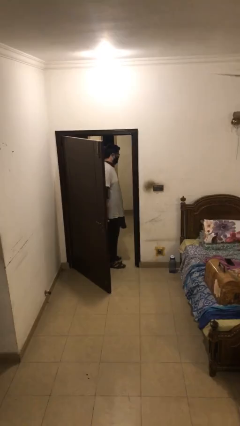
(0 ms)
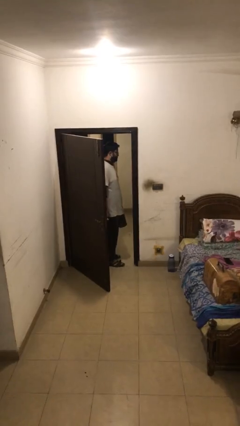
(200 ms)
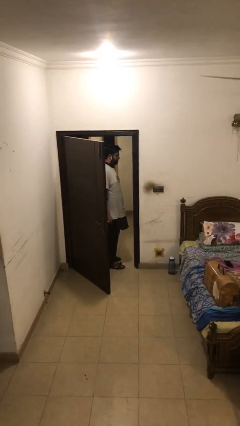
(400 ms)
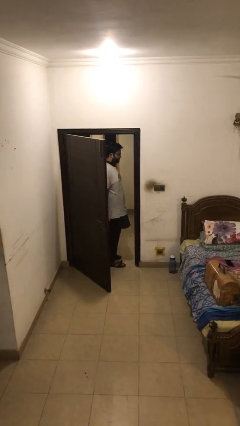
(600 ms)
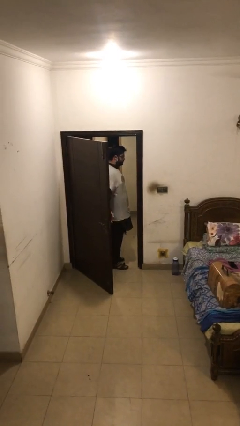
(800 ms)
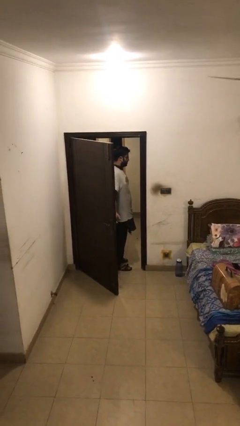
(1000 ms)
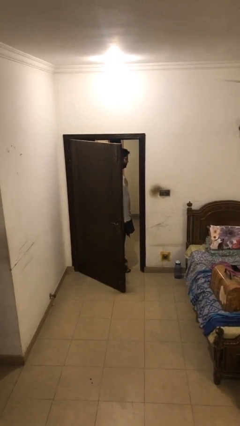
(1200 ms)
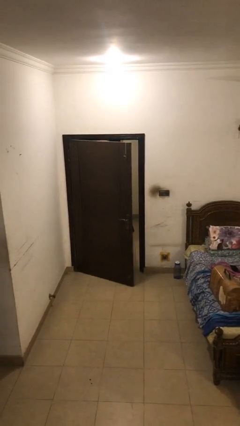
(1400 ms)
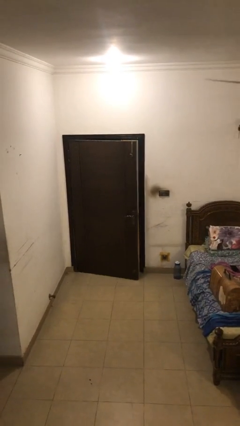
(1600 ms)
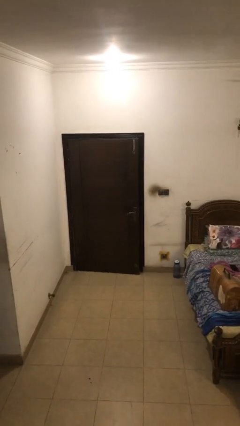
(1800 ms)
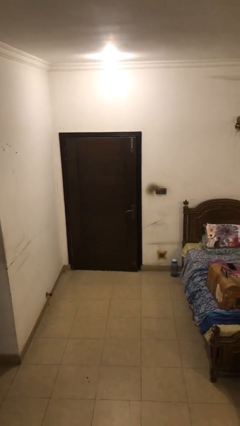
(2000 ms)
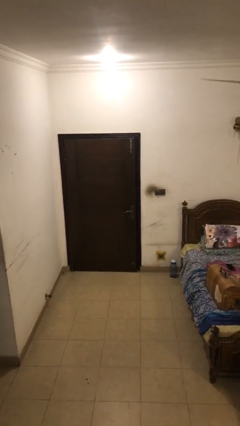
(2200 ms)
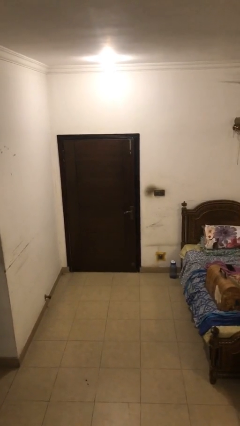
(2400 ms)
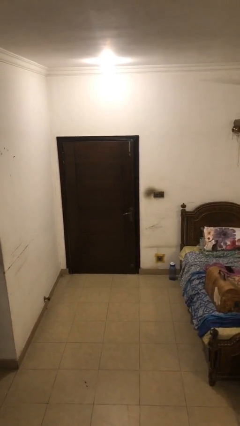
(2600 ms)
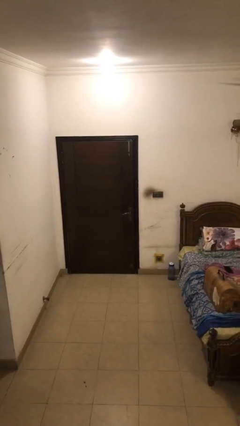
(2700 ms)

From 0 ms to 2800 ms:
person closes facility door

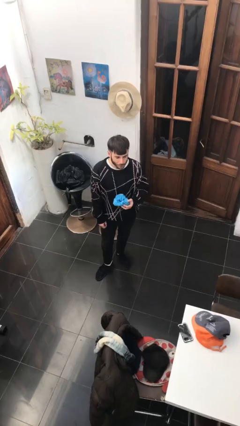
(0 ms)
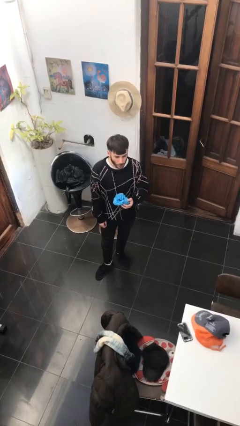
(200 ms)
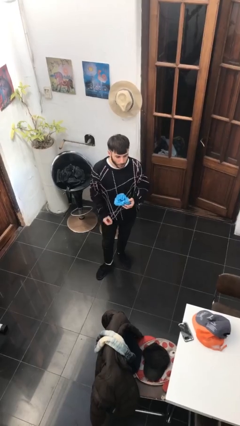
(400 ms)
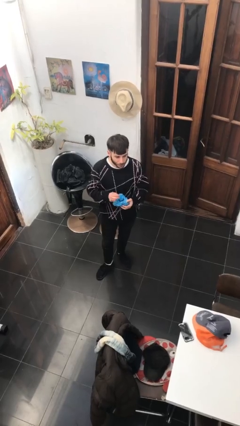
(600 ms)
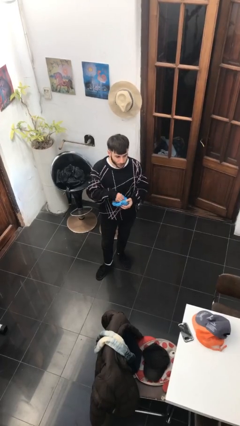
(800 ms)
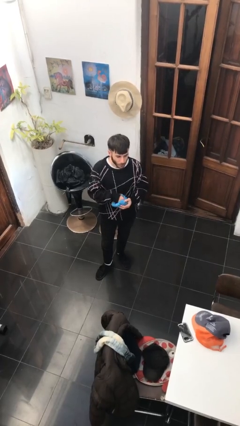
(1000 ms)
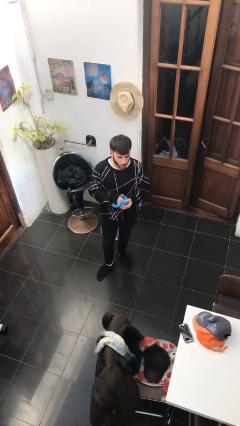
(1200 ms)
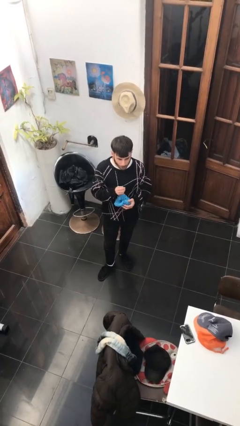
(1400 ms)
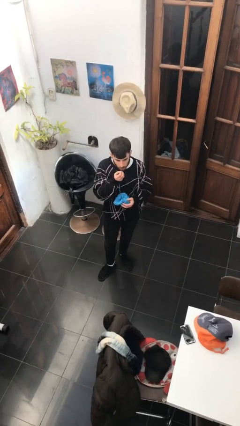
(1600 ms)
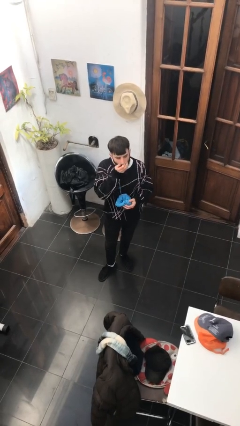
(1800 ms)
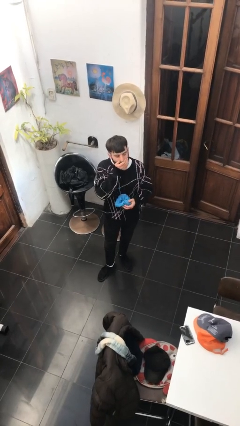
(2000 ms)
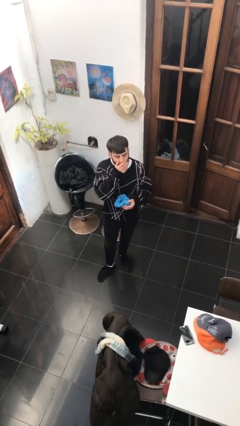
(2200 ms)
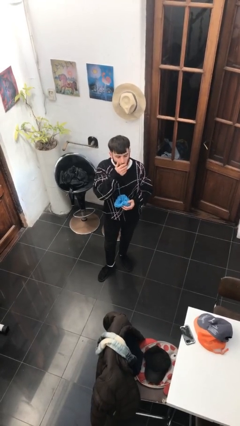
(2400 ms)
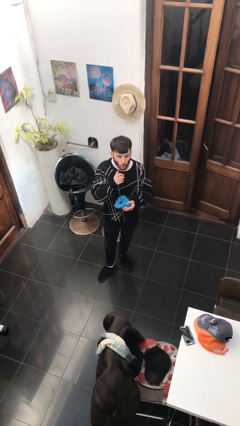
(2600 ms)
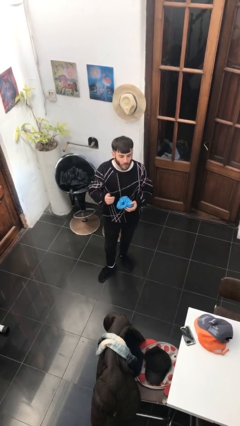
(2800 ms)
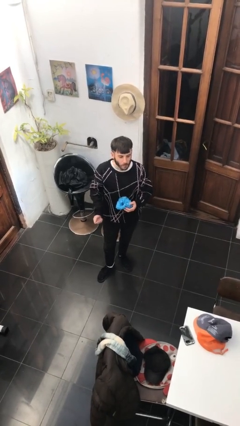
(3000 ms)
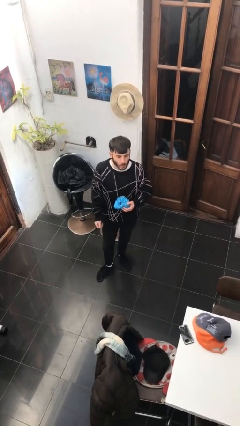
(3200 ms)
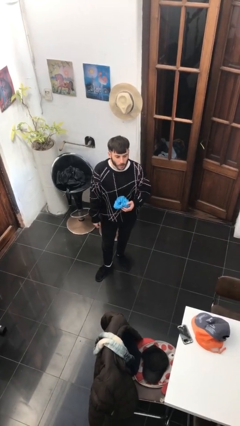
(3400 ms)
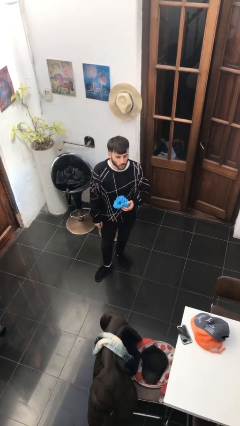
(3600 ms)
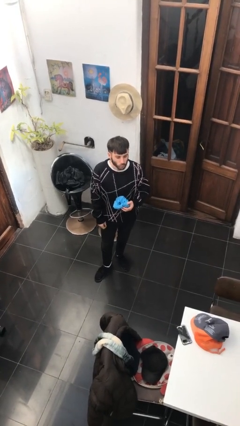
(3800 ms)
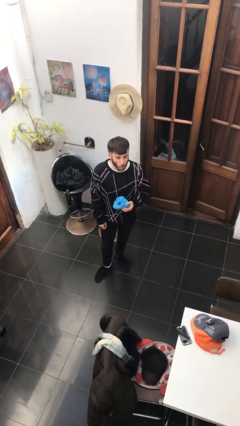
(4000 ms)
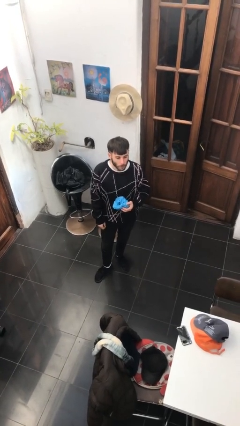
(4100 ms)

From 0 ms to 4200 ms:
person eats snack from bag

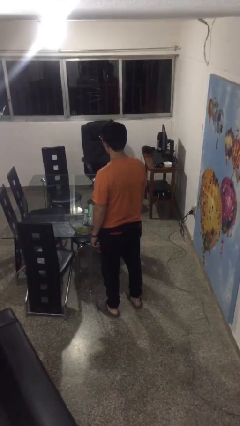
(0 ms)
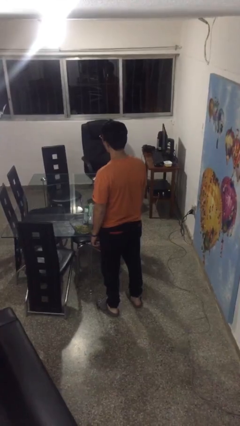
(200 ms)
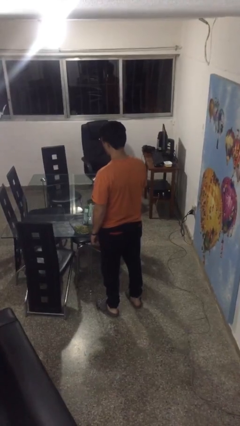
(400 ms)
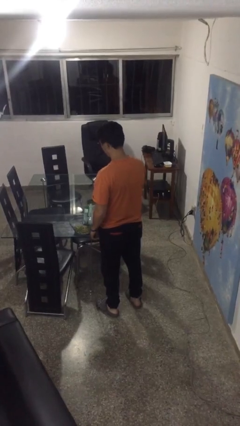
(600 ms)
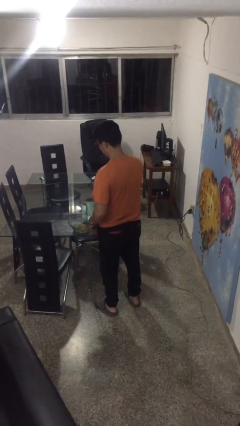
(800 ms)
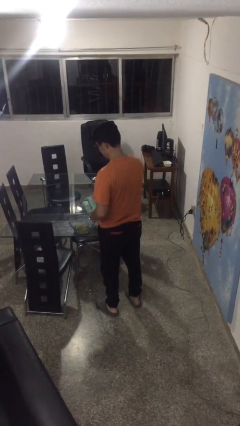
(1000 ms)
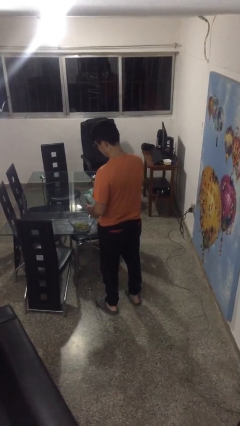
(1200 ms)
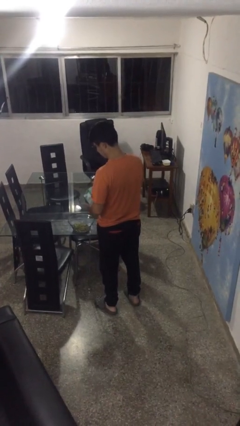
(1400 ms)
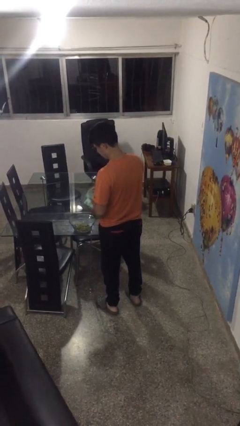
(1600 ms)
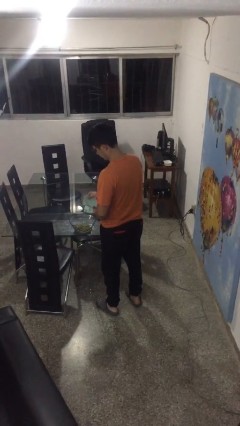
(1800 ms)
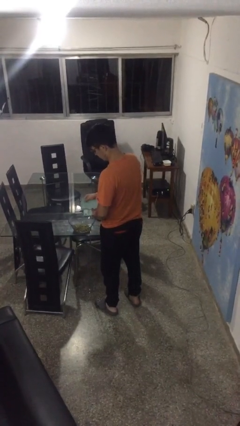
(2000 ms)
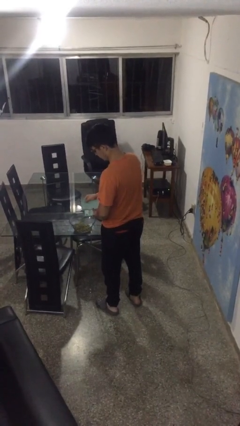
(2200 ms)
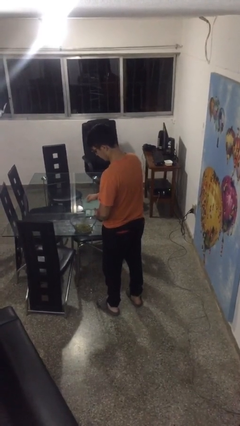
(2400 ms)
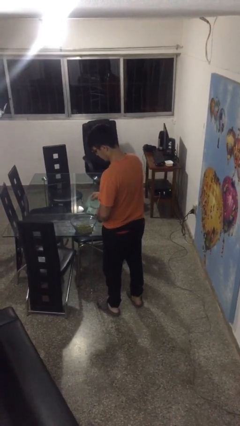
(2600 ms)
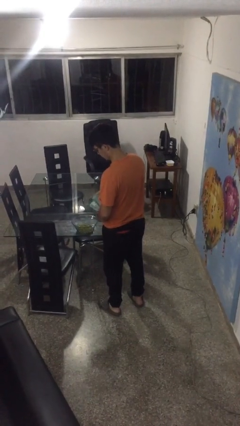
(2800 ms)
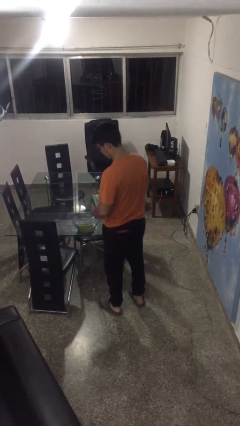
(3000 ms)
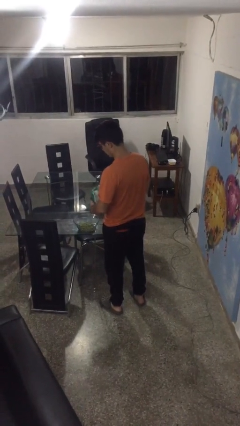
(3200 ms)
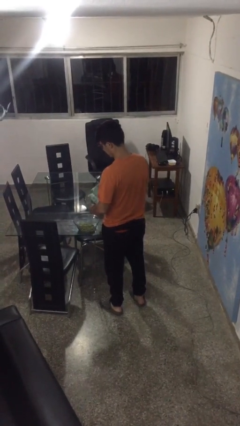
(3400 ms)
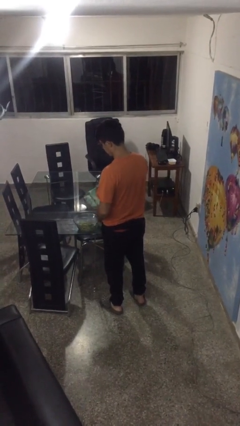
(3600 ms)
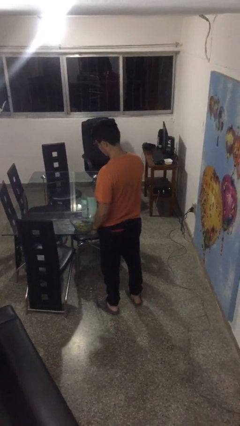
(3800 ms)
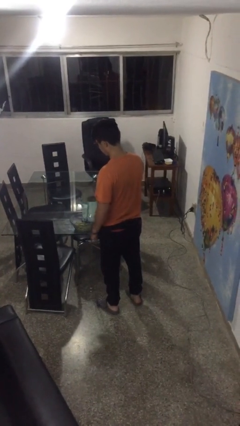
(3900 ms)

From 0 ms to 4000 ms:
person pours into bowl

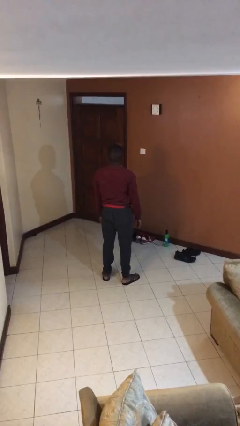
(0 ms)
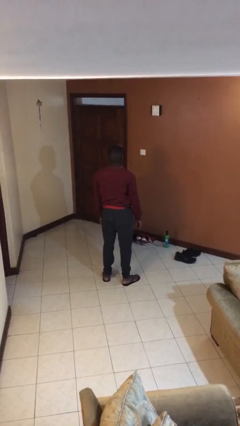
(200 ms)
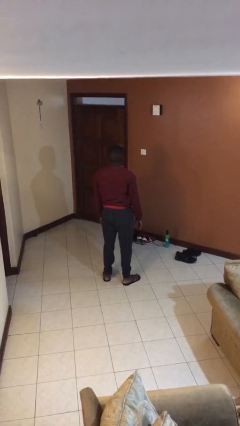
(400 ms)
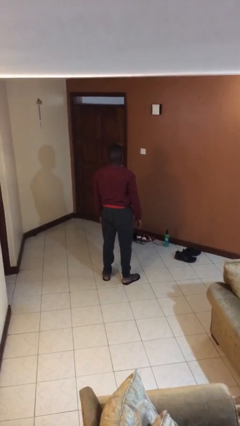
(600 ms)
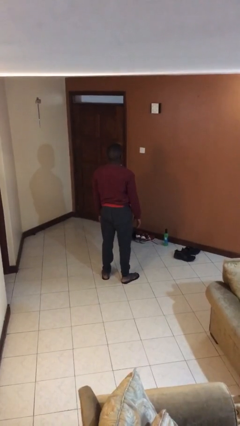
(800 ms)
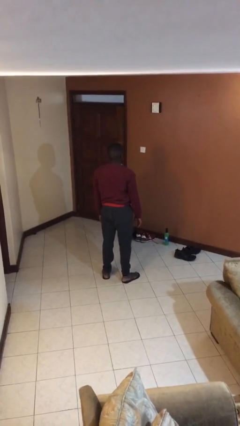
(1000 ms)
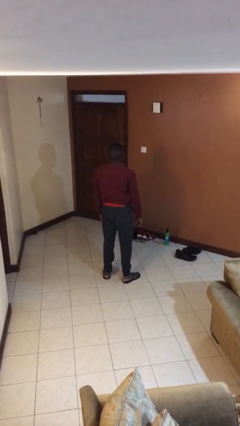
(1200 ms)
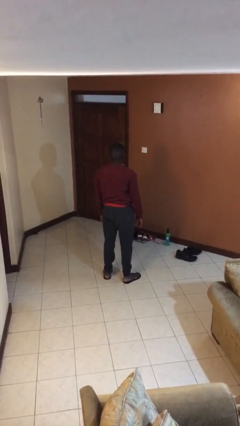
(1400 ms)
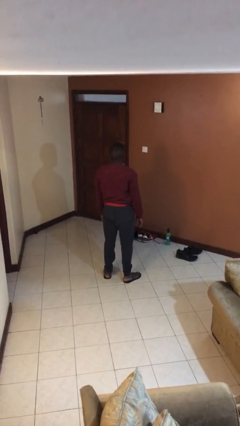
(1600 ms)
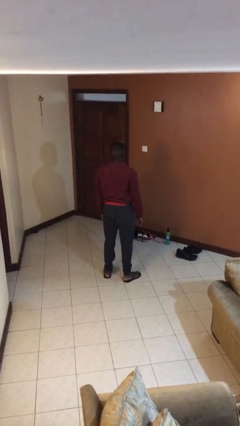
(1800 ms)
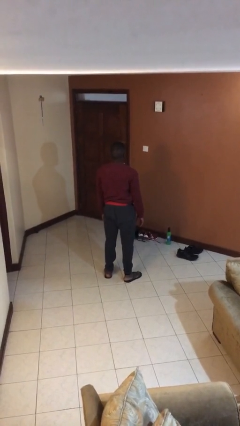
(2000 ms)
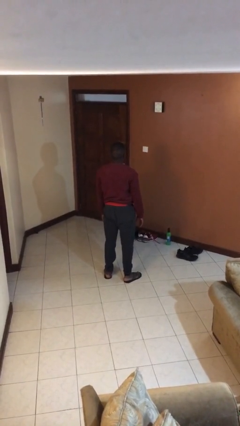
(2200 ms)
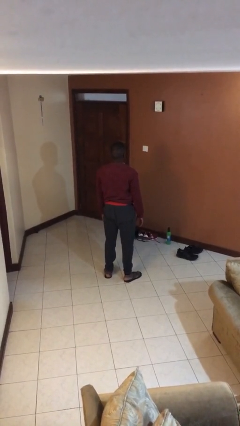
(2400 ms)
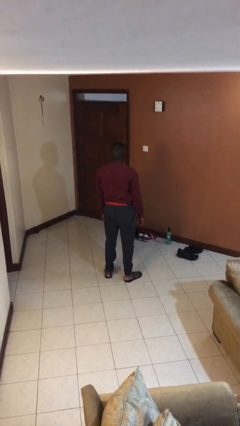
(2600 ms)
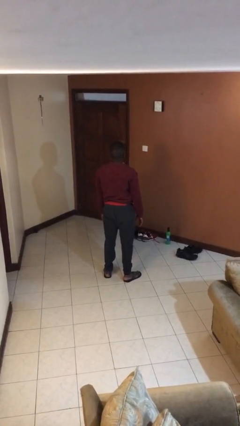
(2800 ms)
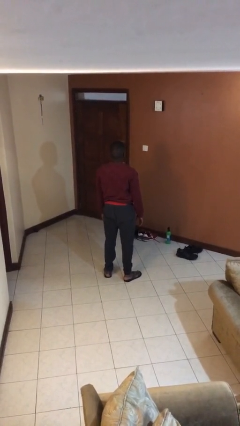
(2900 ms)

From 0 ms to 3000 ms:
person gestures swipe up

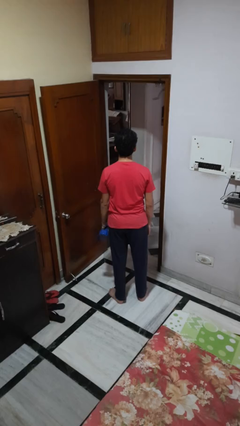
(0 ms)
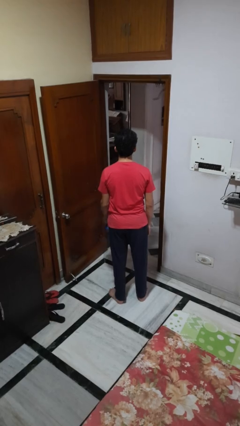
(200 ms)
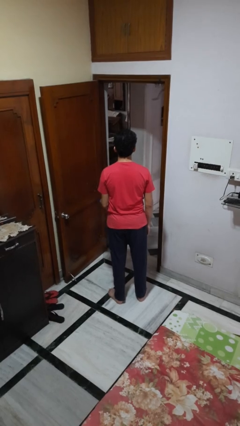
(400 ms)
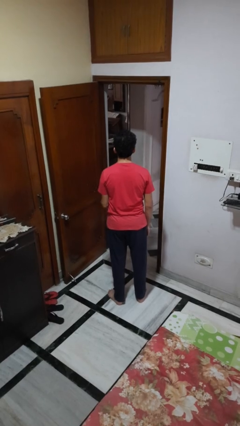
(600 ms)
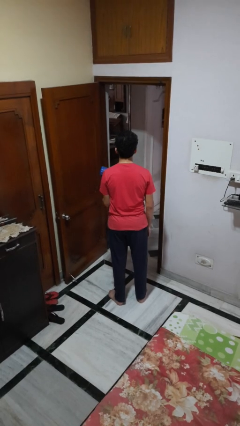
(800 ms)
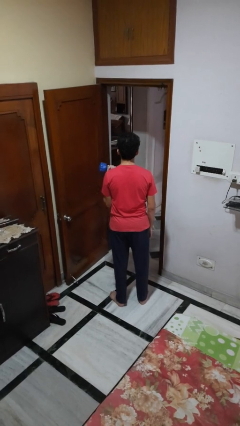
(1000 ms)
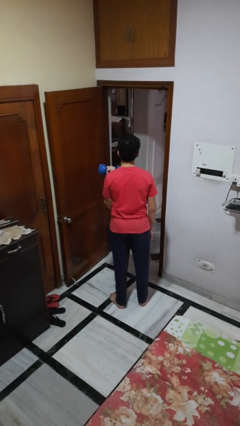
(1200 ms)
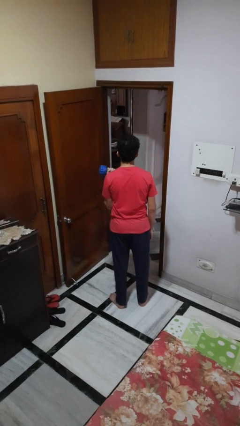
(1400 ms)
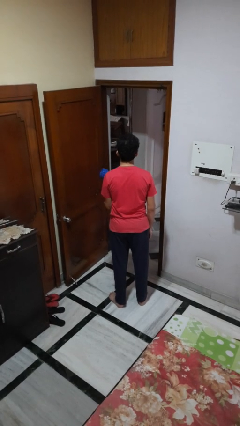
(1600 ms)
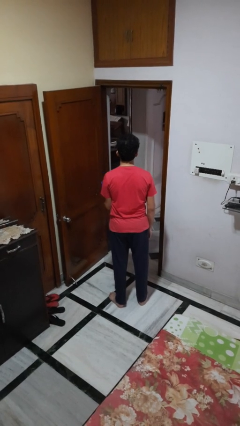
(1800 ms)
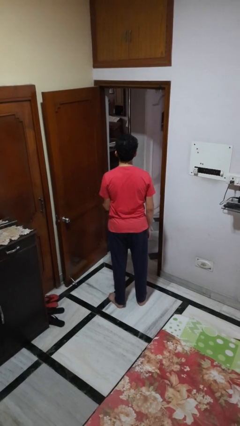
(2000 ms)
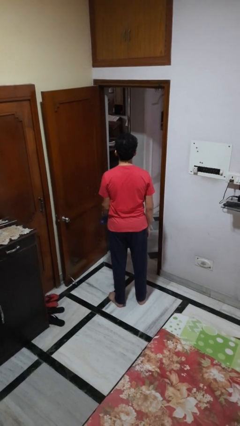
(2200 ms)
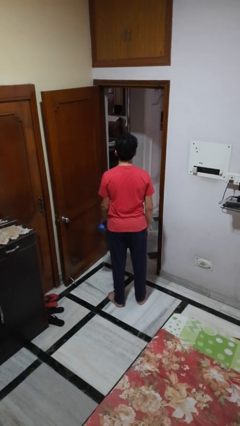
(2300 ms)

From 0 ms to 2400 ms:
person lifts dumbbells

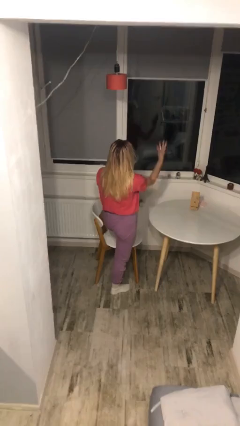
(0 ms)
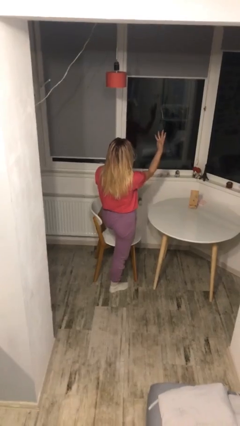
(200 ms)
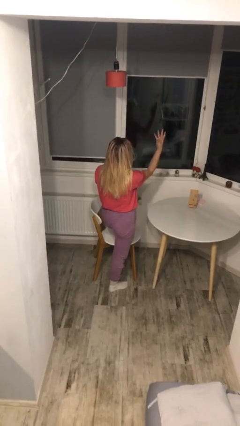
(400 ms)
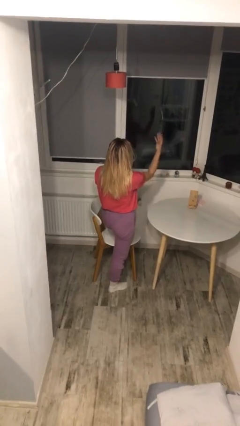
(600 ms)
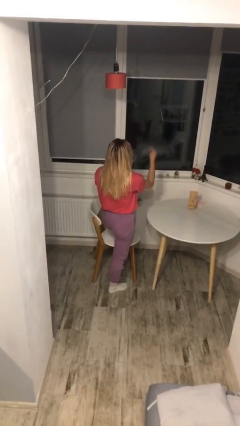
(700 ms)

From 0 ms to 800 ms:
person gestures number four

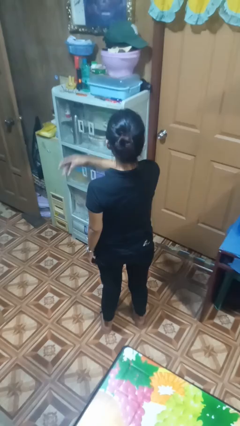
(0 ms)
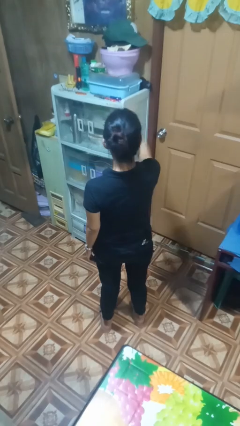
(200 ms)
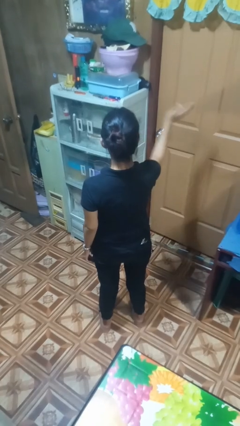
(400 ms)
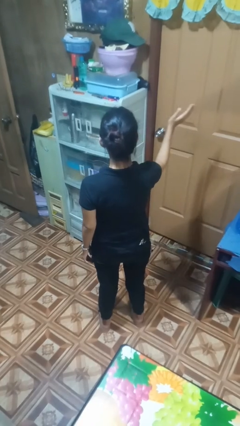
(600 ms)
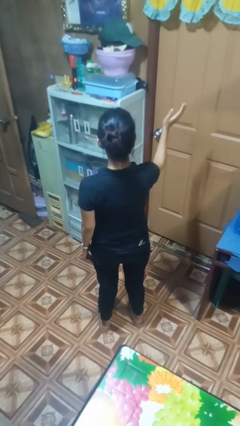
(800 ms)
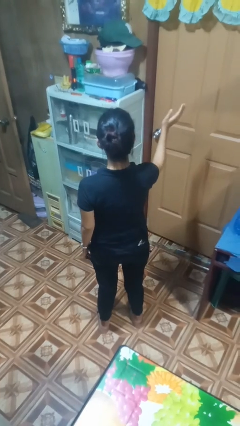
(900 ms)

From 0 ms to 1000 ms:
person gestures swipe right
